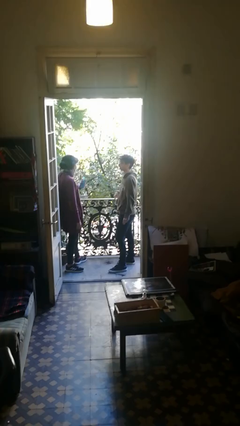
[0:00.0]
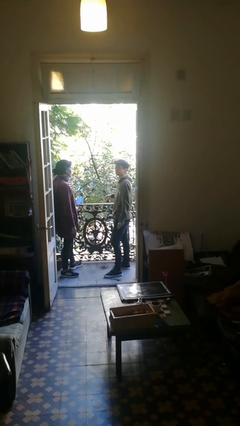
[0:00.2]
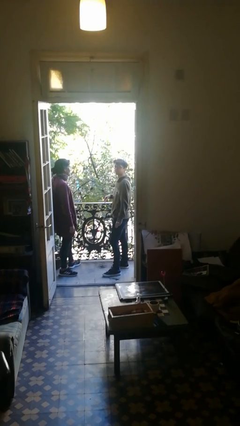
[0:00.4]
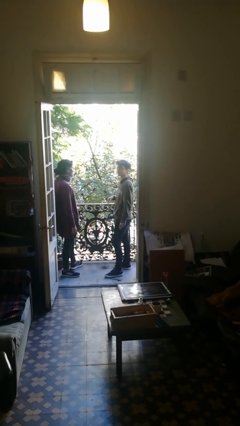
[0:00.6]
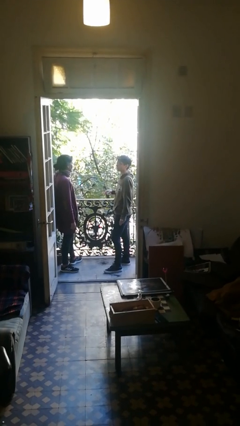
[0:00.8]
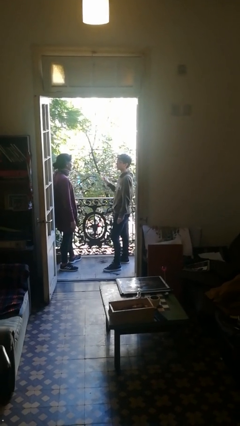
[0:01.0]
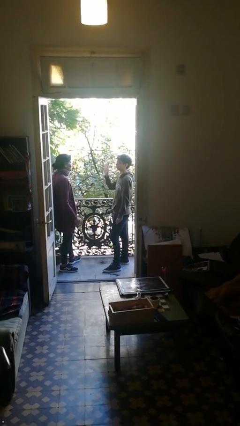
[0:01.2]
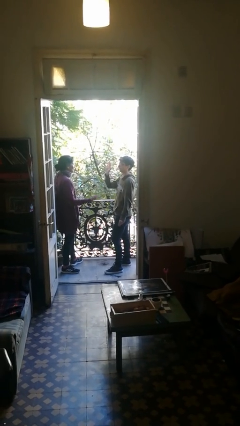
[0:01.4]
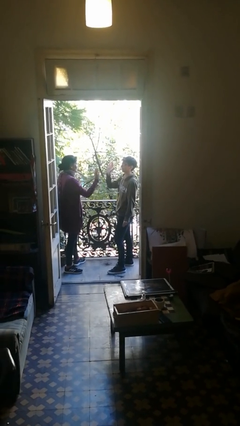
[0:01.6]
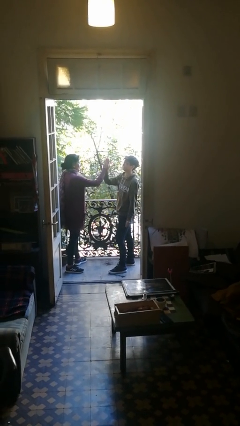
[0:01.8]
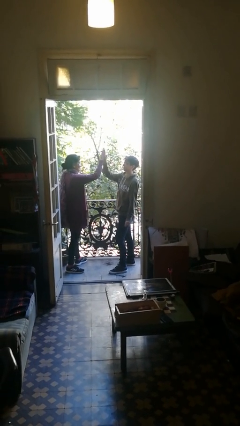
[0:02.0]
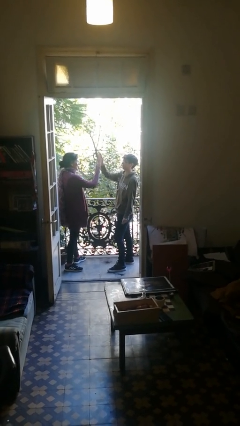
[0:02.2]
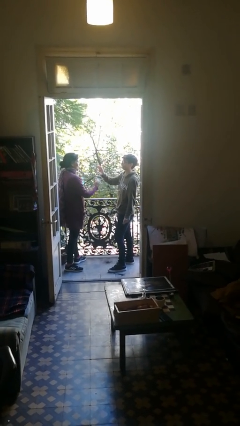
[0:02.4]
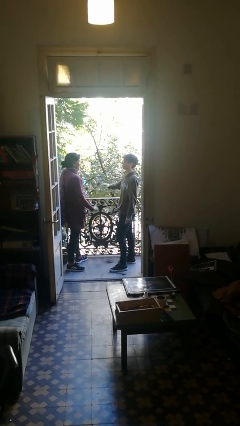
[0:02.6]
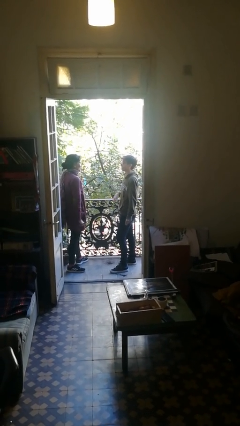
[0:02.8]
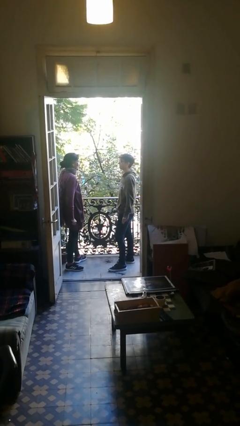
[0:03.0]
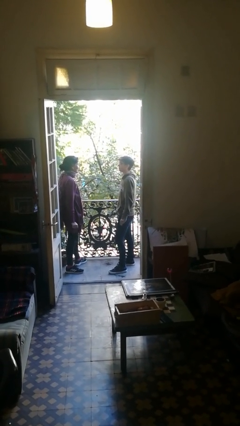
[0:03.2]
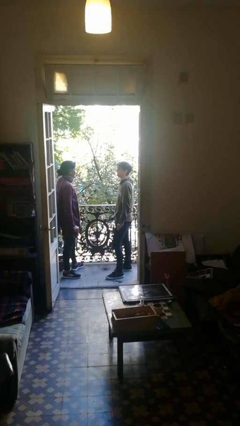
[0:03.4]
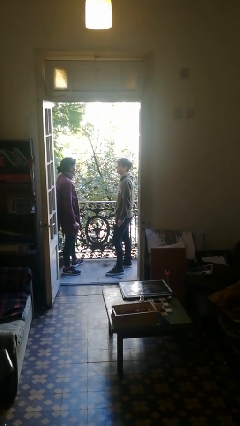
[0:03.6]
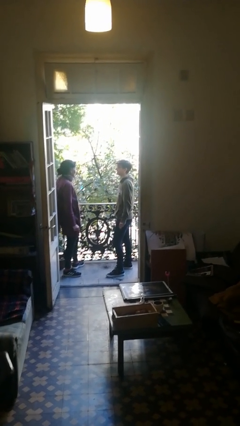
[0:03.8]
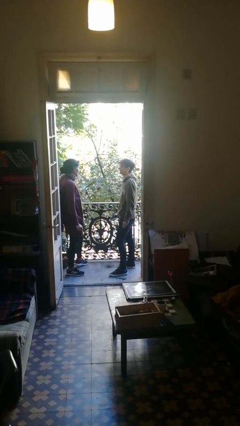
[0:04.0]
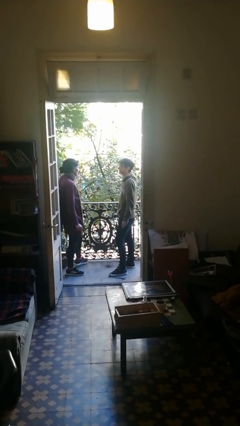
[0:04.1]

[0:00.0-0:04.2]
person highfives hand

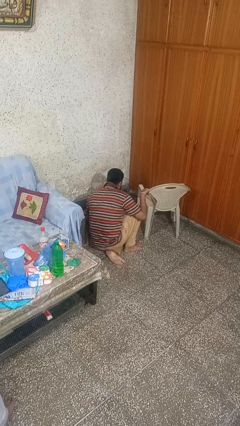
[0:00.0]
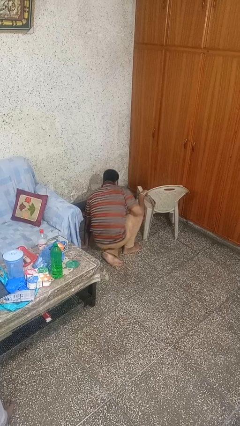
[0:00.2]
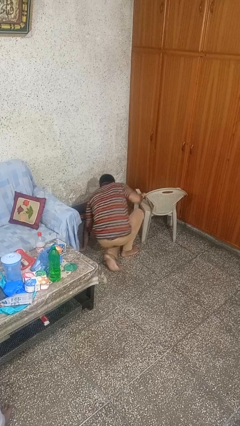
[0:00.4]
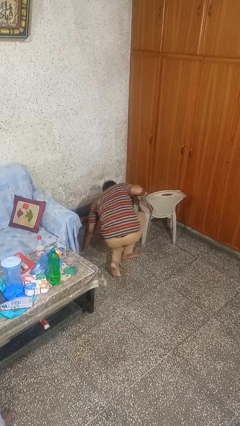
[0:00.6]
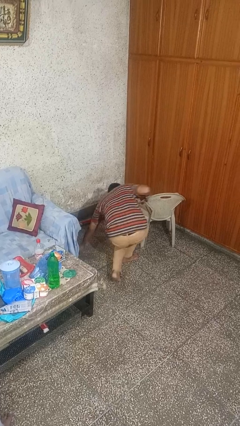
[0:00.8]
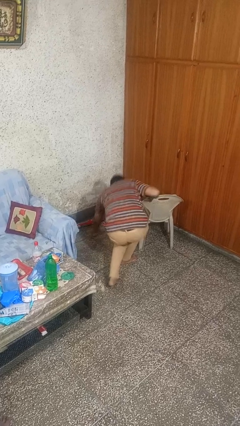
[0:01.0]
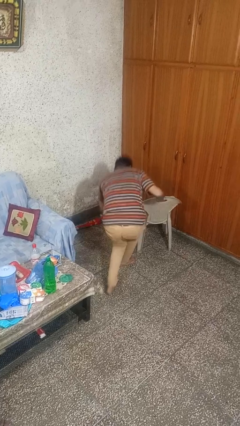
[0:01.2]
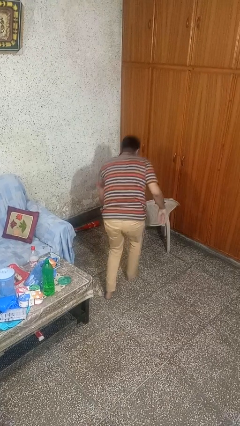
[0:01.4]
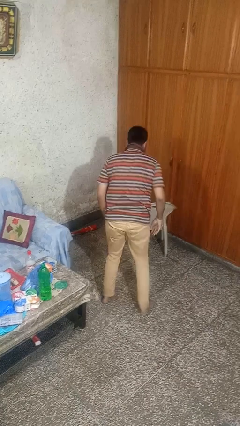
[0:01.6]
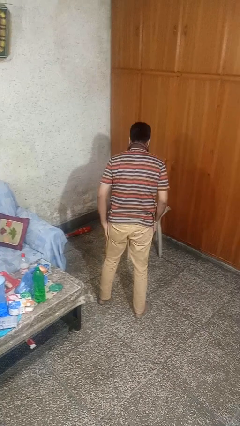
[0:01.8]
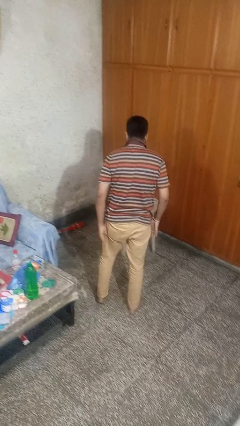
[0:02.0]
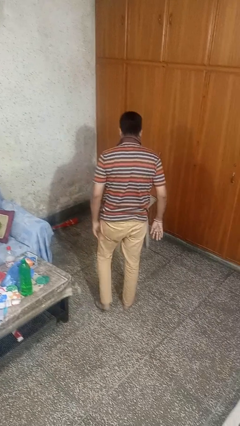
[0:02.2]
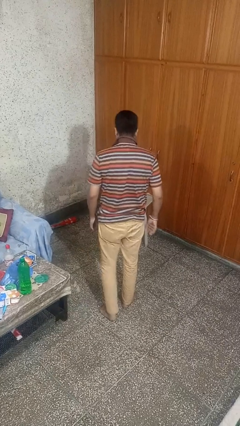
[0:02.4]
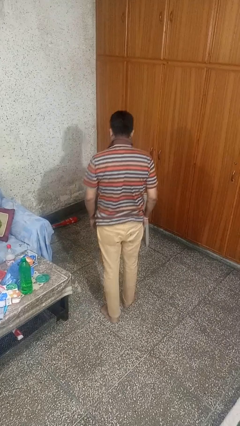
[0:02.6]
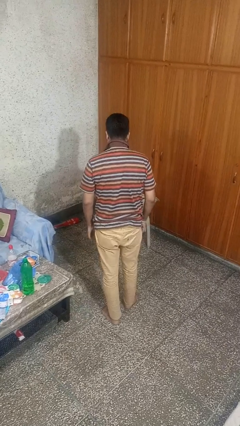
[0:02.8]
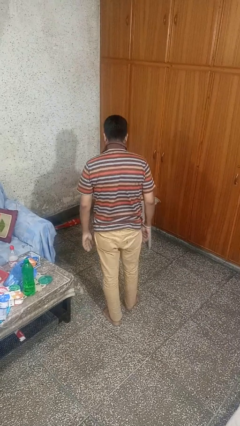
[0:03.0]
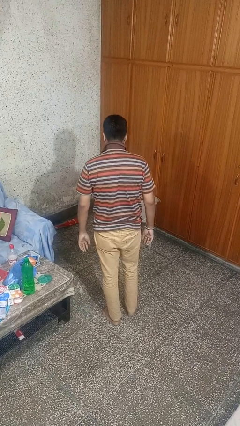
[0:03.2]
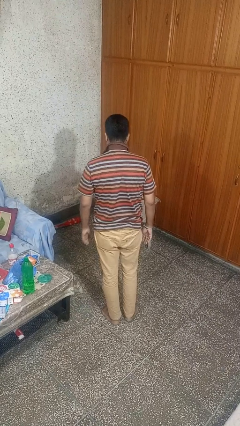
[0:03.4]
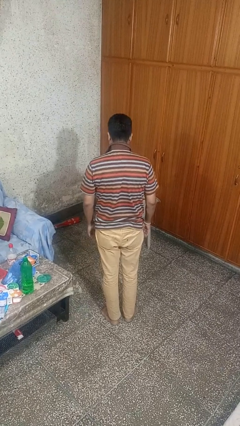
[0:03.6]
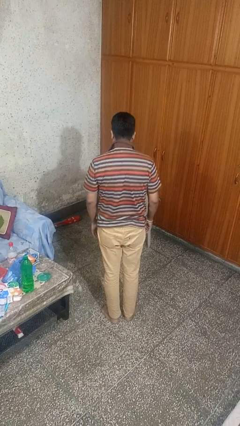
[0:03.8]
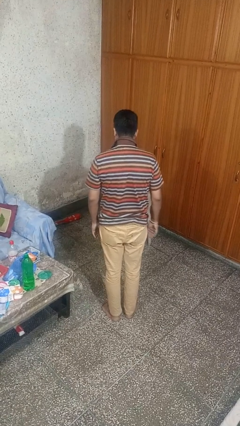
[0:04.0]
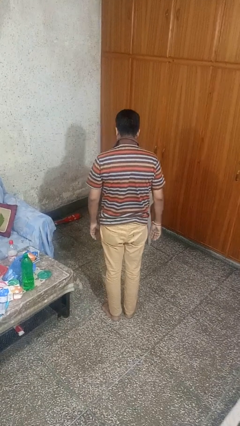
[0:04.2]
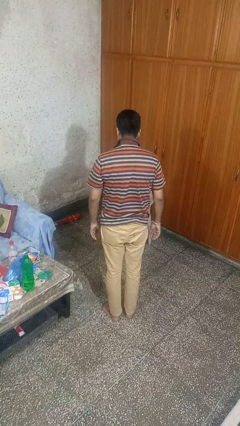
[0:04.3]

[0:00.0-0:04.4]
person stands up from floor

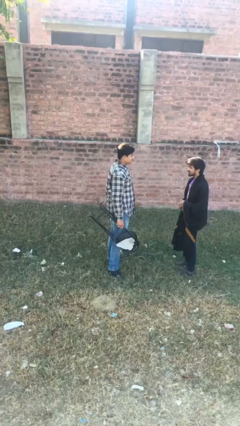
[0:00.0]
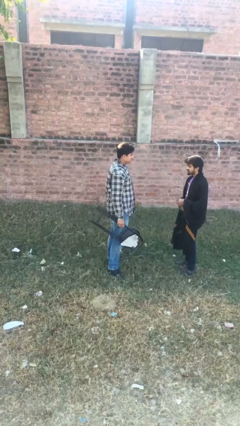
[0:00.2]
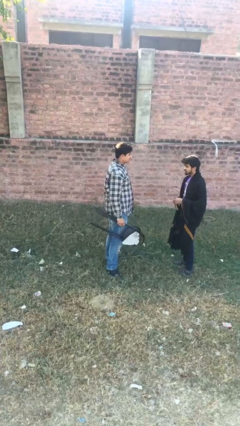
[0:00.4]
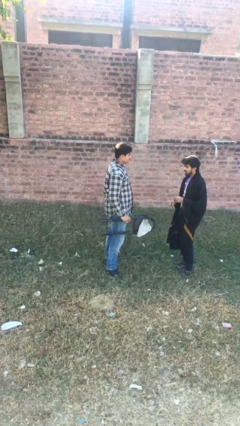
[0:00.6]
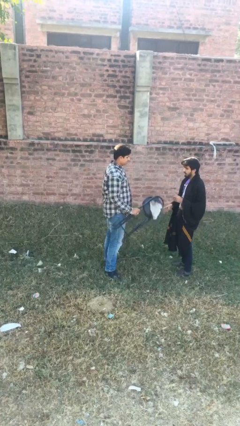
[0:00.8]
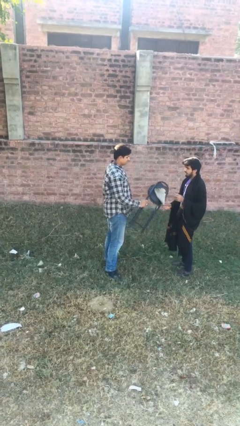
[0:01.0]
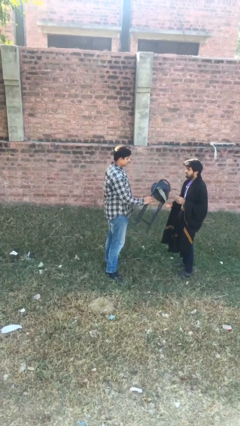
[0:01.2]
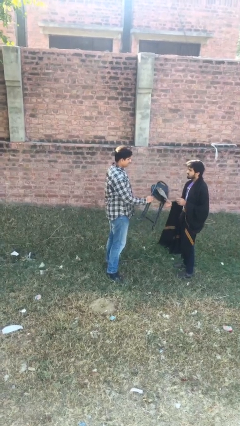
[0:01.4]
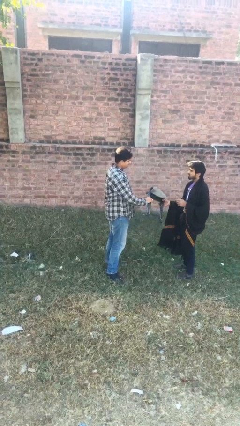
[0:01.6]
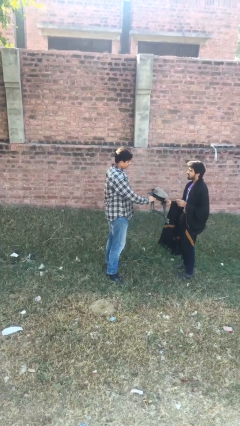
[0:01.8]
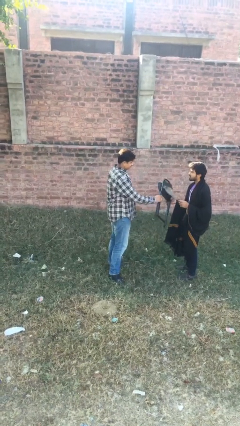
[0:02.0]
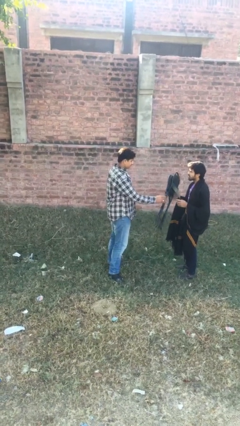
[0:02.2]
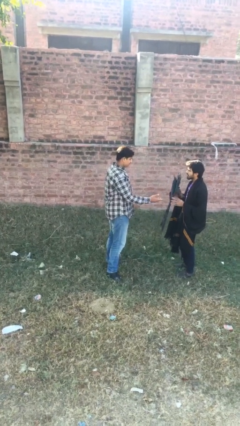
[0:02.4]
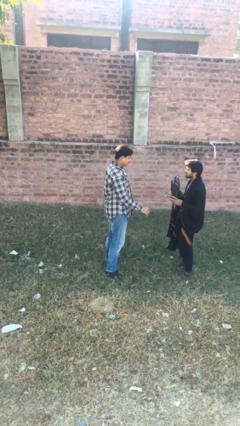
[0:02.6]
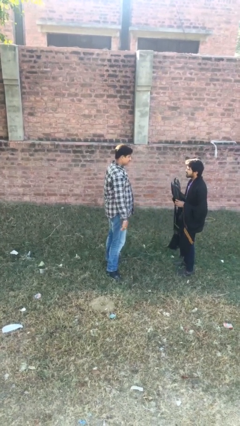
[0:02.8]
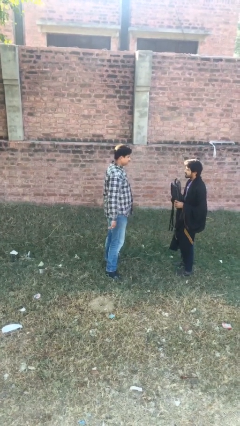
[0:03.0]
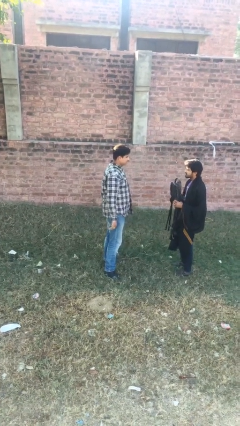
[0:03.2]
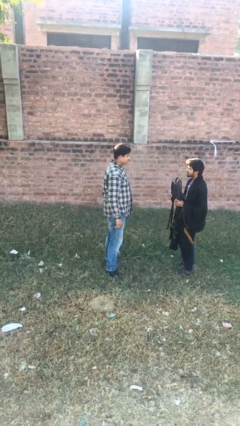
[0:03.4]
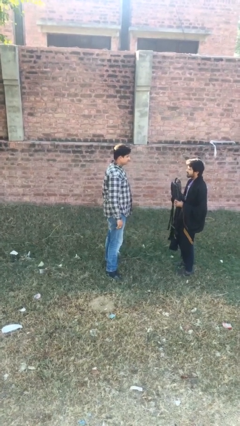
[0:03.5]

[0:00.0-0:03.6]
person transfers object to person

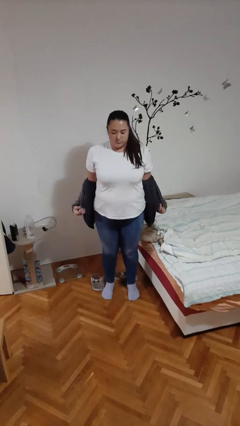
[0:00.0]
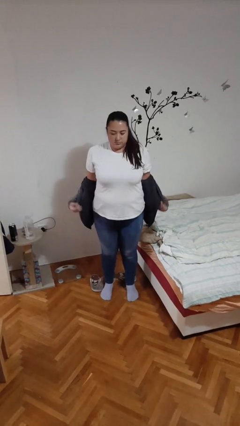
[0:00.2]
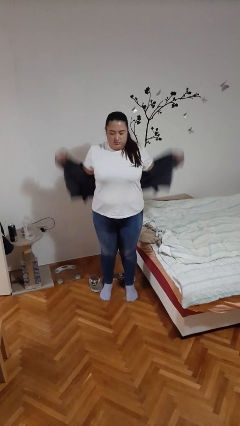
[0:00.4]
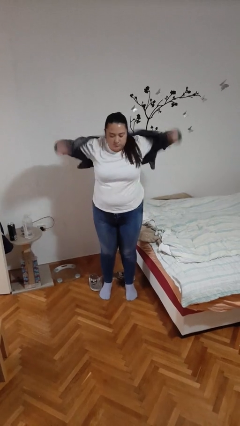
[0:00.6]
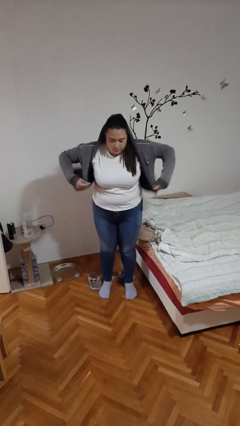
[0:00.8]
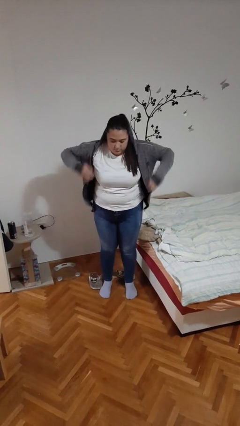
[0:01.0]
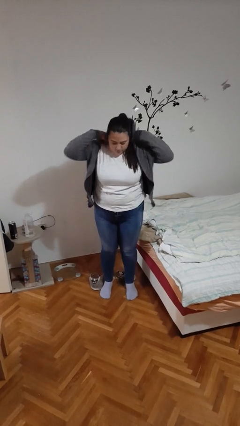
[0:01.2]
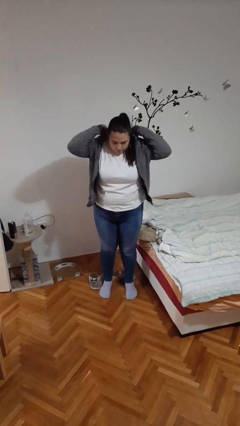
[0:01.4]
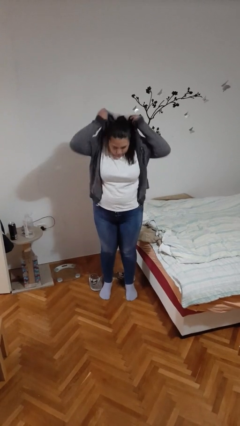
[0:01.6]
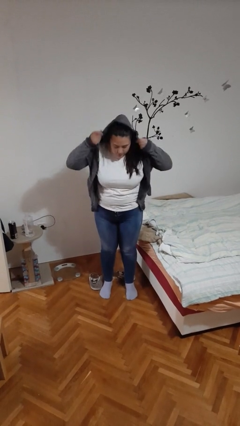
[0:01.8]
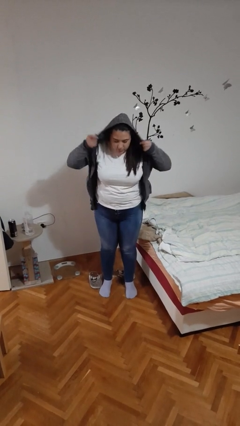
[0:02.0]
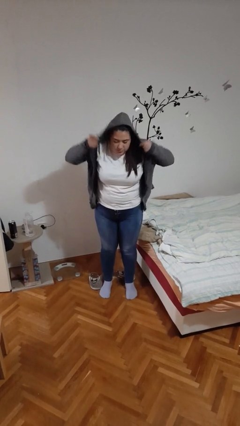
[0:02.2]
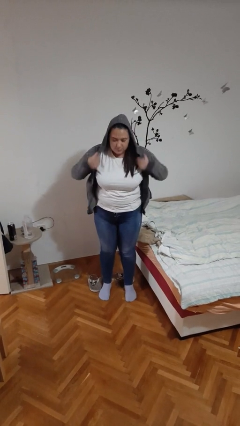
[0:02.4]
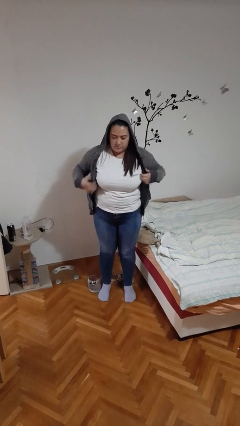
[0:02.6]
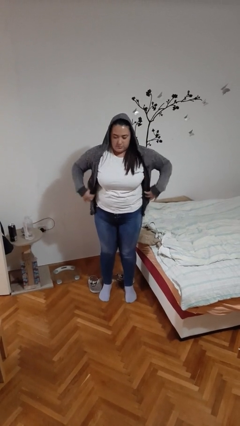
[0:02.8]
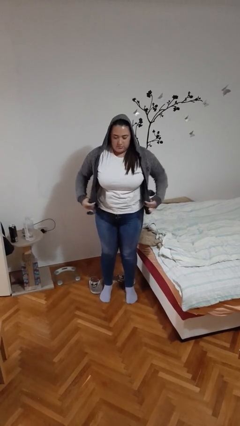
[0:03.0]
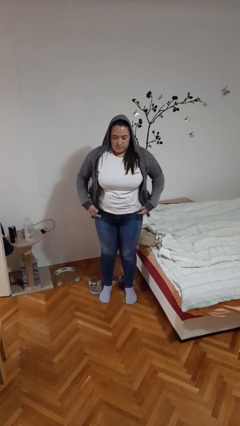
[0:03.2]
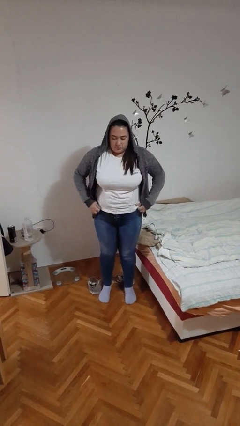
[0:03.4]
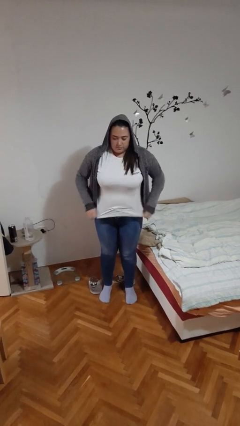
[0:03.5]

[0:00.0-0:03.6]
person puts on hoodie

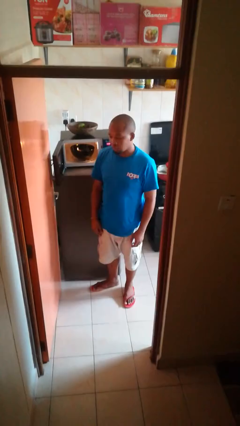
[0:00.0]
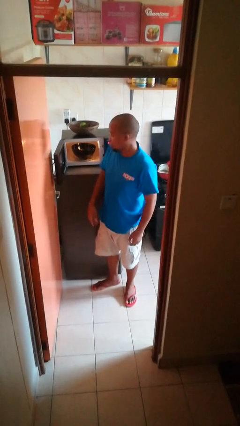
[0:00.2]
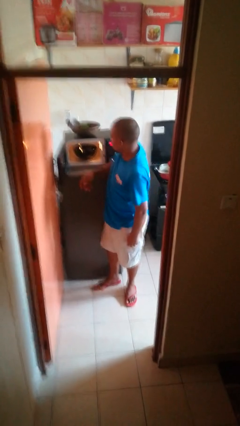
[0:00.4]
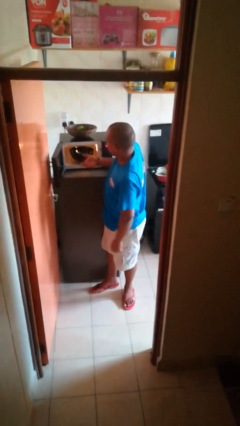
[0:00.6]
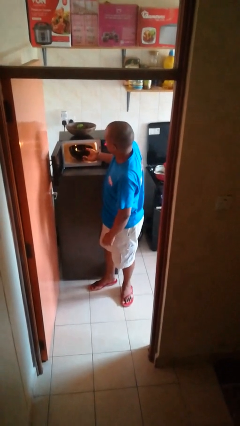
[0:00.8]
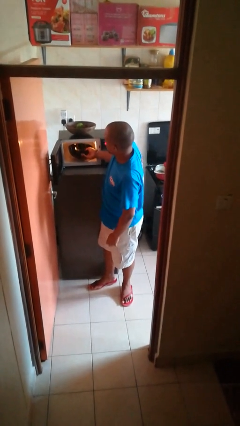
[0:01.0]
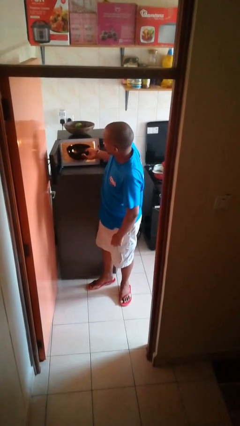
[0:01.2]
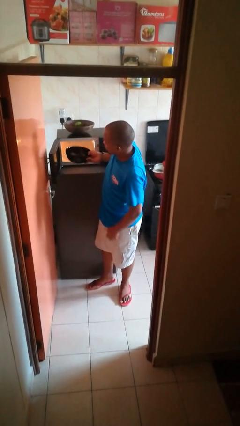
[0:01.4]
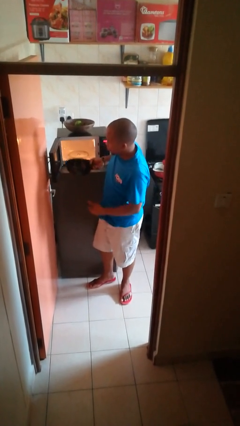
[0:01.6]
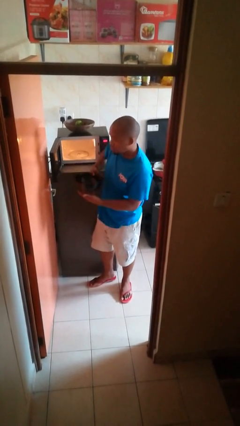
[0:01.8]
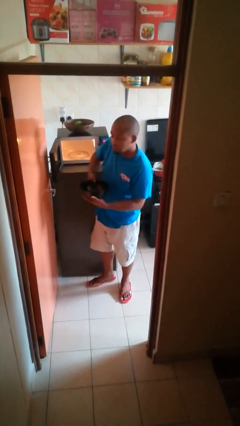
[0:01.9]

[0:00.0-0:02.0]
person takes object from microwave
